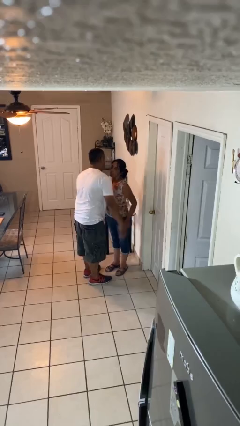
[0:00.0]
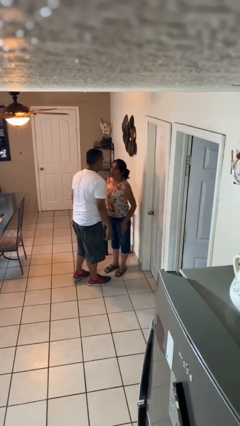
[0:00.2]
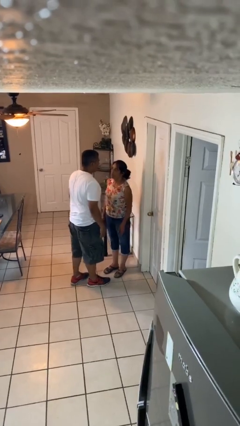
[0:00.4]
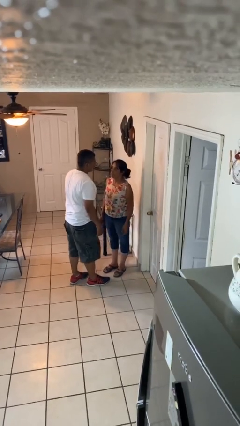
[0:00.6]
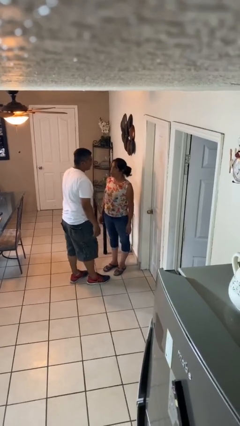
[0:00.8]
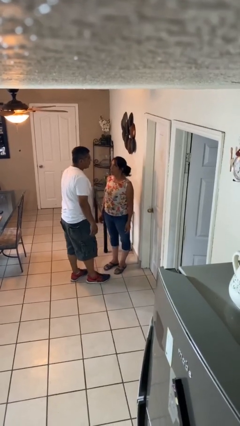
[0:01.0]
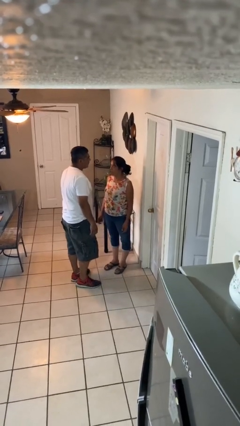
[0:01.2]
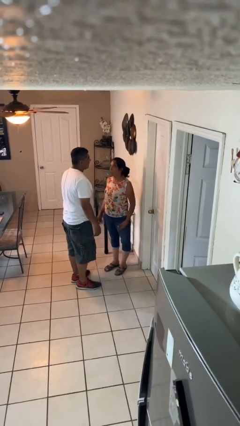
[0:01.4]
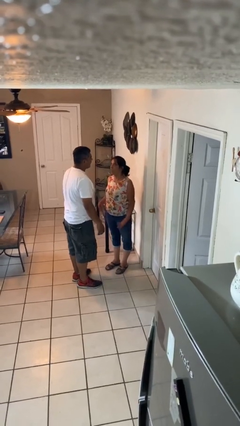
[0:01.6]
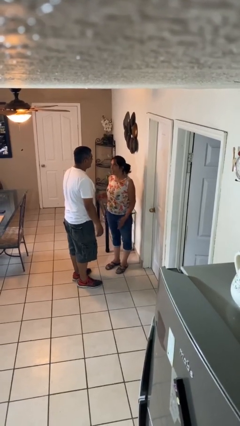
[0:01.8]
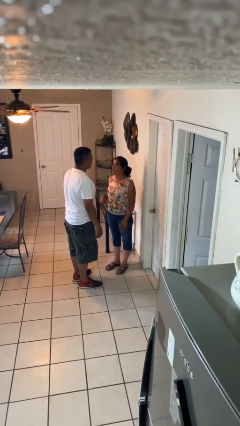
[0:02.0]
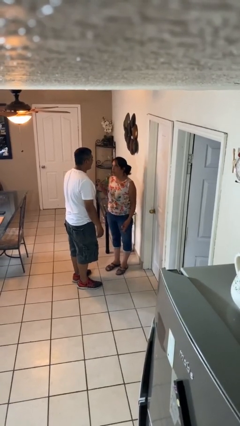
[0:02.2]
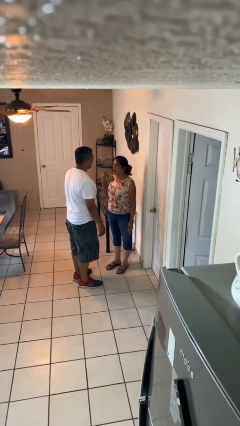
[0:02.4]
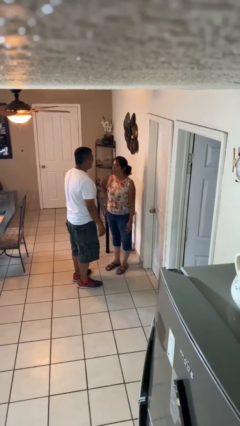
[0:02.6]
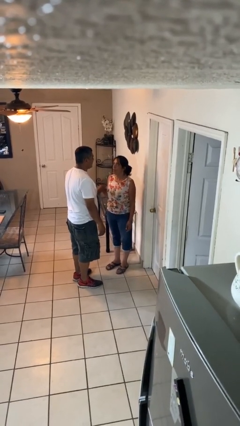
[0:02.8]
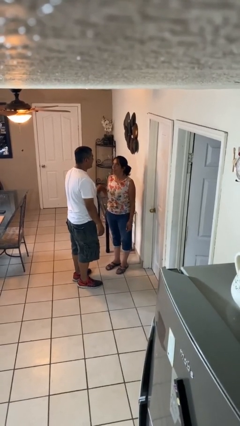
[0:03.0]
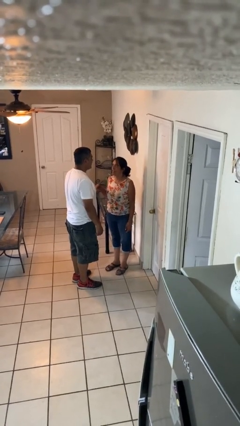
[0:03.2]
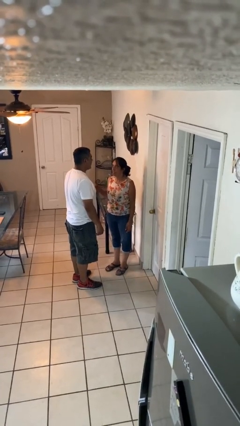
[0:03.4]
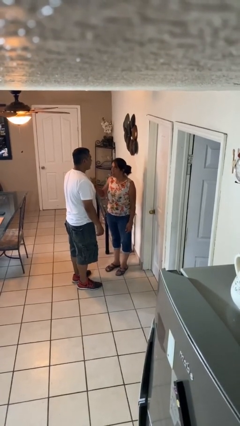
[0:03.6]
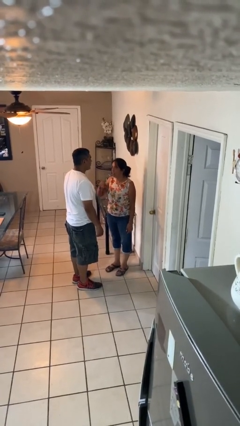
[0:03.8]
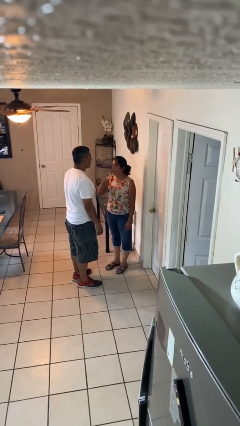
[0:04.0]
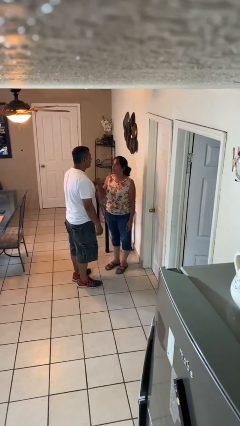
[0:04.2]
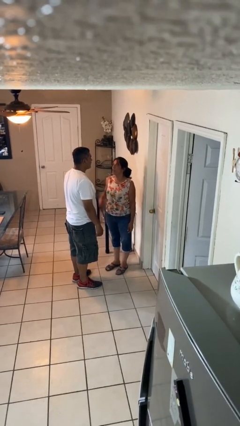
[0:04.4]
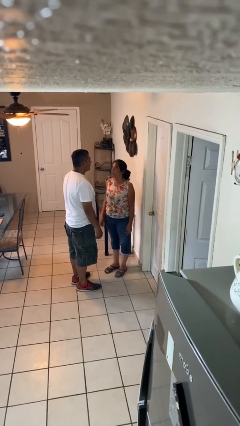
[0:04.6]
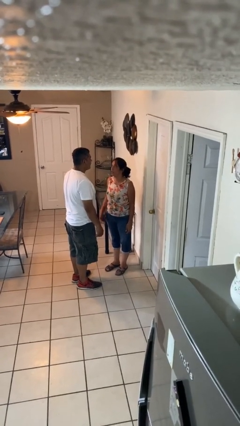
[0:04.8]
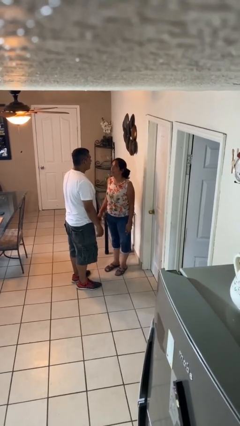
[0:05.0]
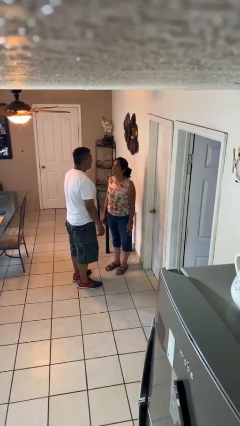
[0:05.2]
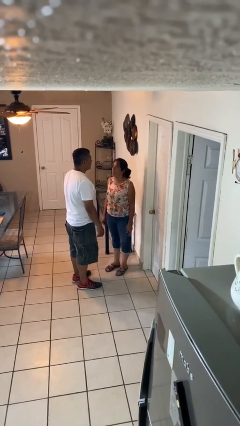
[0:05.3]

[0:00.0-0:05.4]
person talks to person

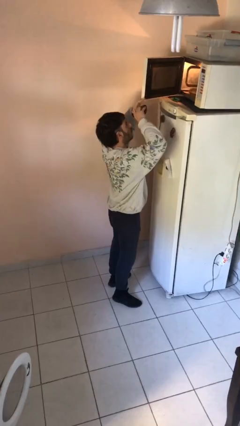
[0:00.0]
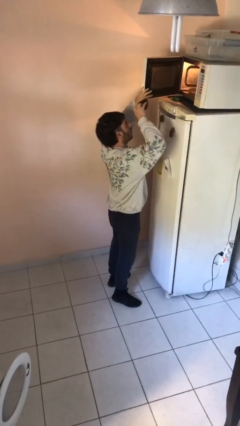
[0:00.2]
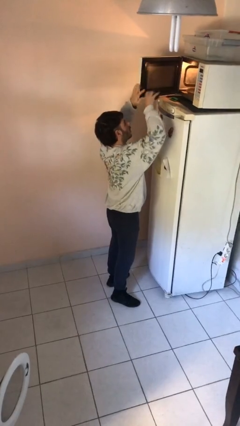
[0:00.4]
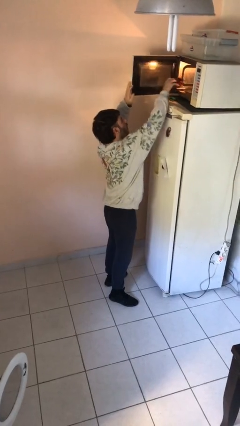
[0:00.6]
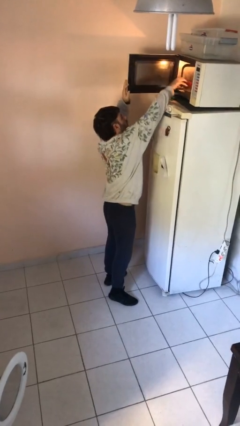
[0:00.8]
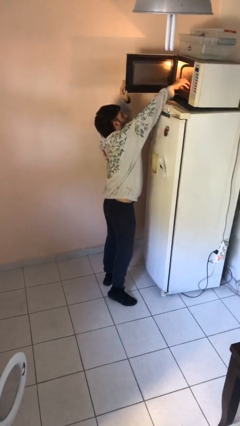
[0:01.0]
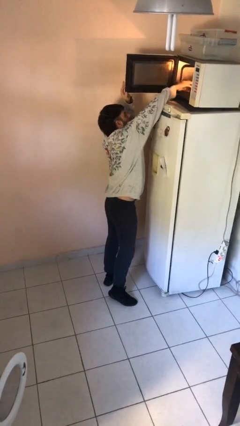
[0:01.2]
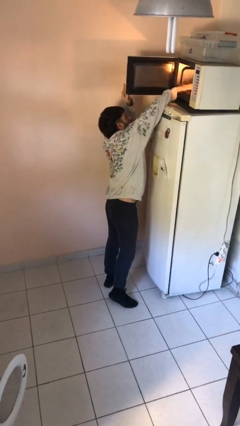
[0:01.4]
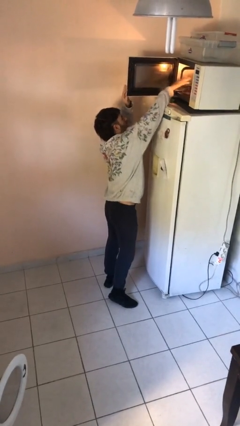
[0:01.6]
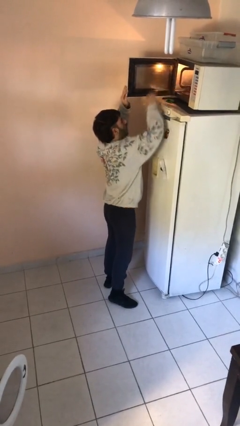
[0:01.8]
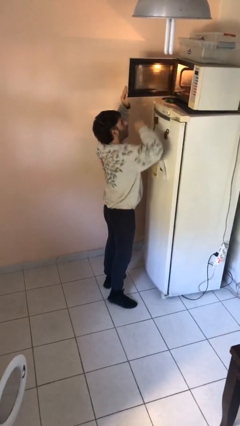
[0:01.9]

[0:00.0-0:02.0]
person puts object into microwave

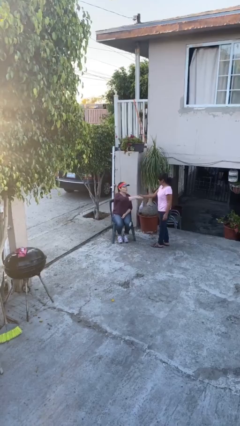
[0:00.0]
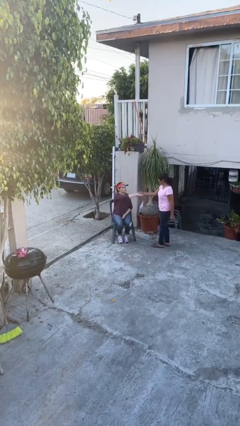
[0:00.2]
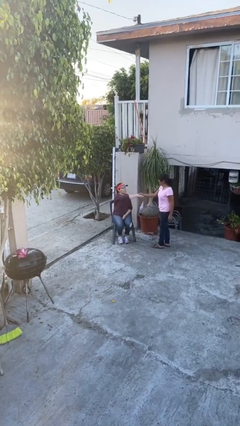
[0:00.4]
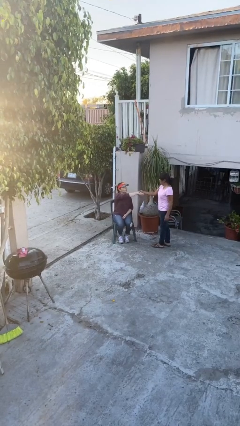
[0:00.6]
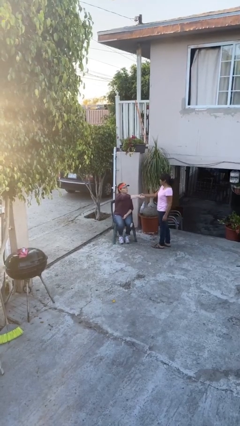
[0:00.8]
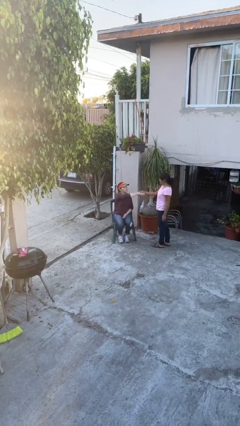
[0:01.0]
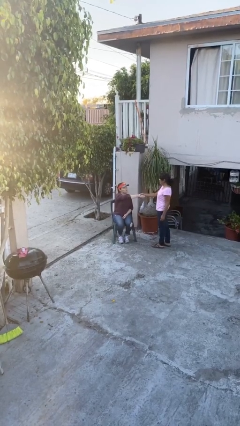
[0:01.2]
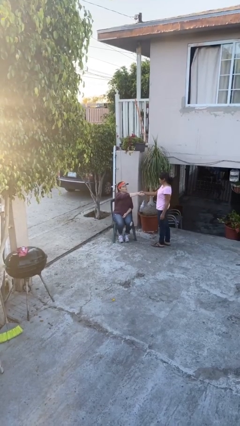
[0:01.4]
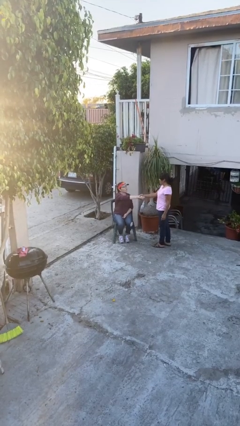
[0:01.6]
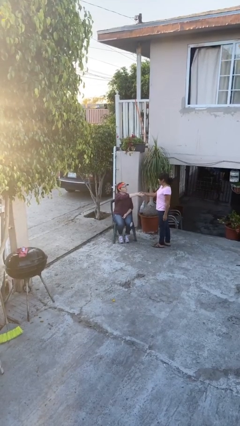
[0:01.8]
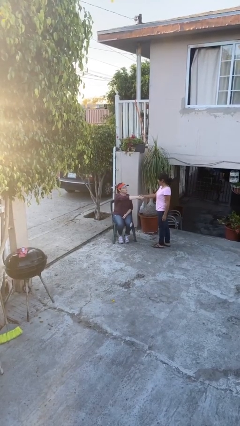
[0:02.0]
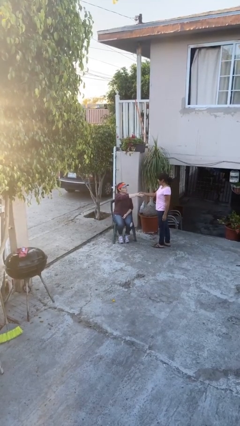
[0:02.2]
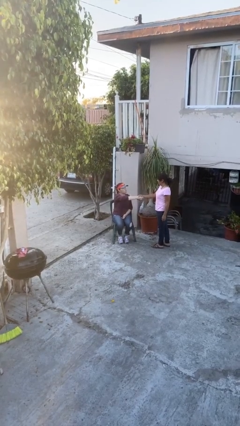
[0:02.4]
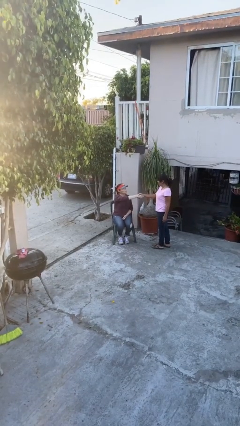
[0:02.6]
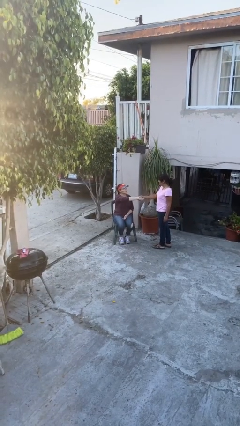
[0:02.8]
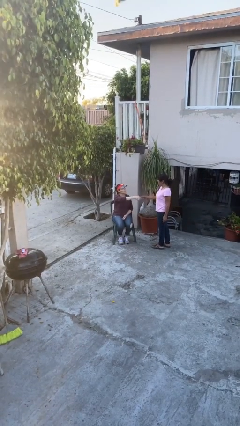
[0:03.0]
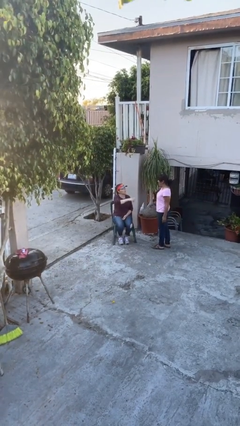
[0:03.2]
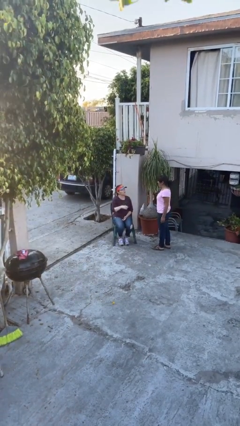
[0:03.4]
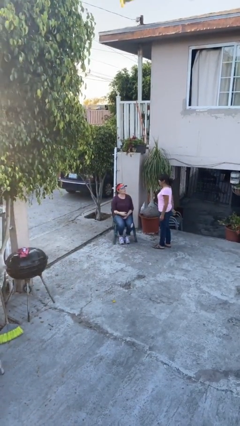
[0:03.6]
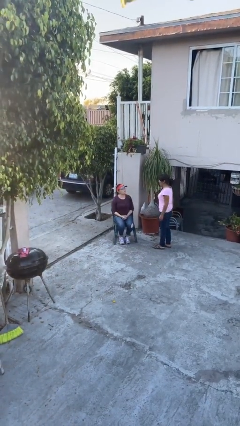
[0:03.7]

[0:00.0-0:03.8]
person shakes hand

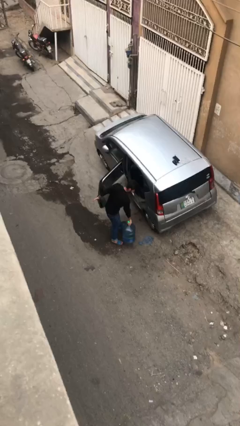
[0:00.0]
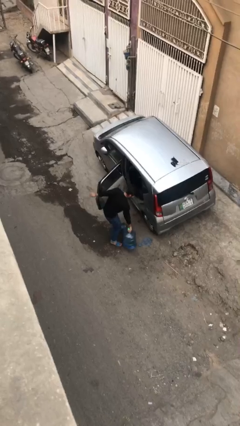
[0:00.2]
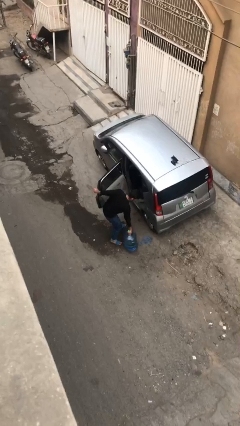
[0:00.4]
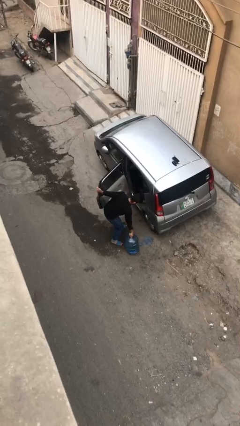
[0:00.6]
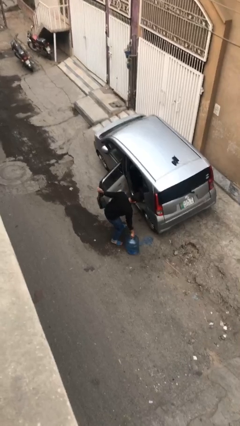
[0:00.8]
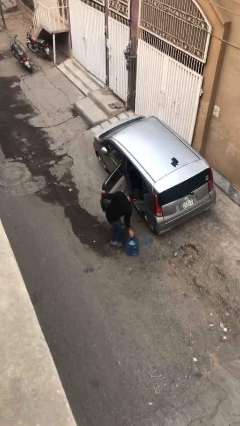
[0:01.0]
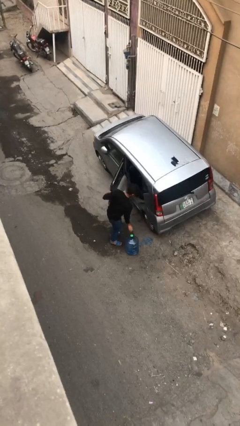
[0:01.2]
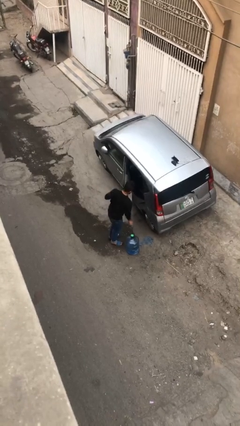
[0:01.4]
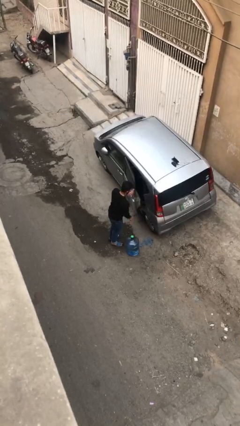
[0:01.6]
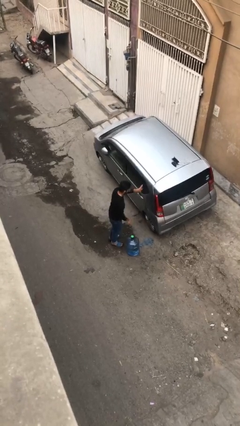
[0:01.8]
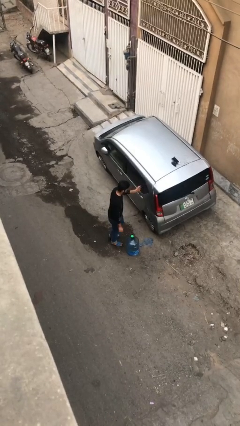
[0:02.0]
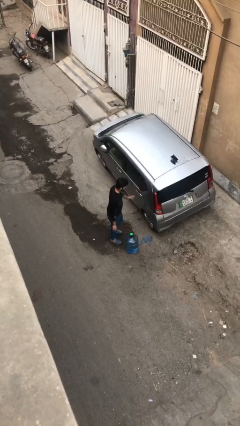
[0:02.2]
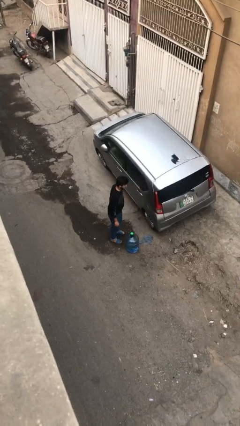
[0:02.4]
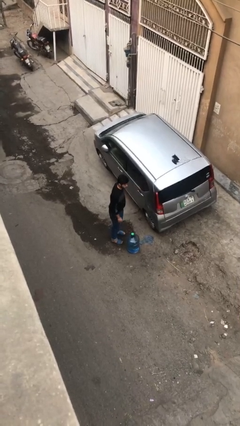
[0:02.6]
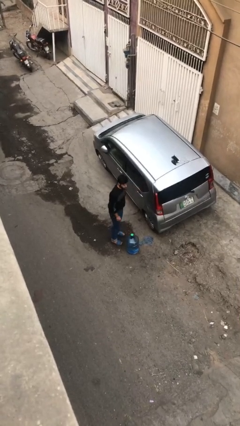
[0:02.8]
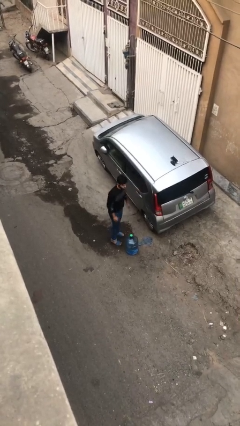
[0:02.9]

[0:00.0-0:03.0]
person closes car door

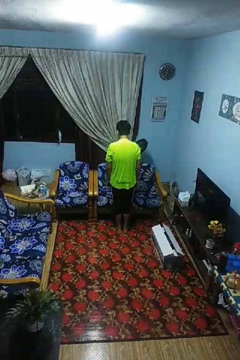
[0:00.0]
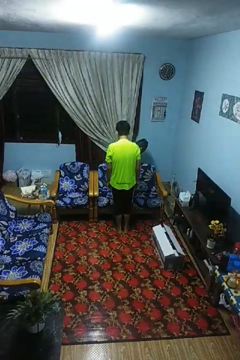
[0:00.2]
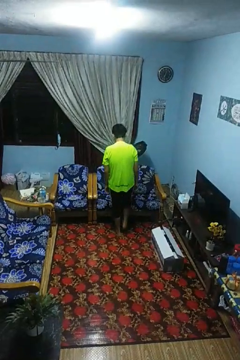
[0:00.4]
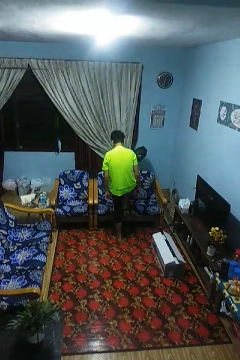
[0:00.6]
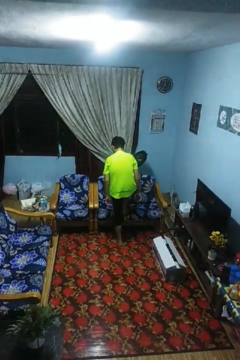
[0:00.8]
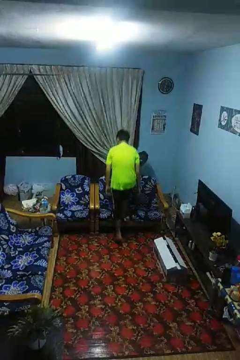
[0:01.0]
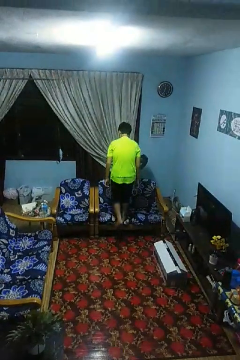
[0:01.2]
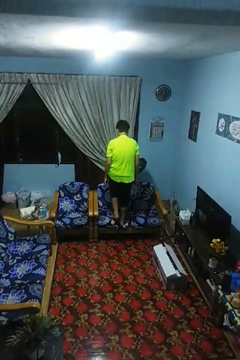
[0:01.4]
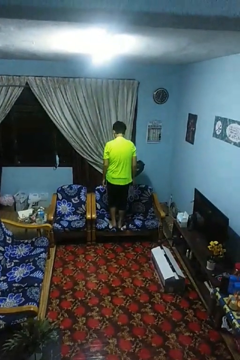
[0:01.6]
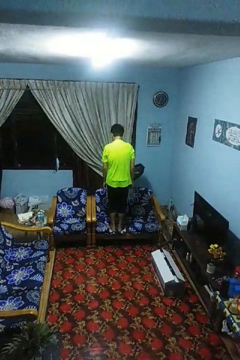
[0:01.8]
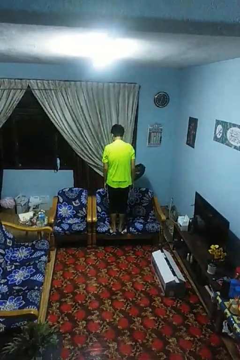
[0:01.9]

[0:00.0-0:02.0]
person climbs on couch

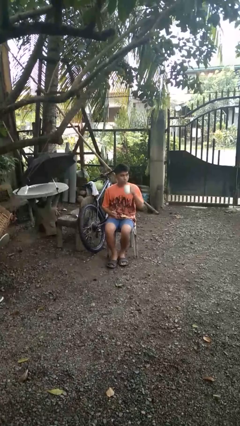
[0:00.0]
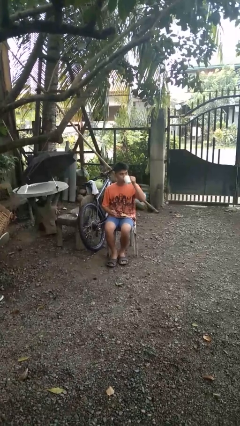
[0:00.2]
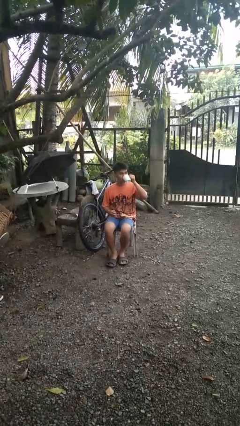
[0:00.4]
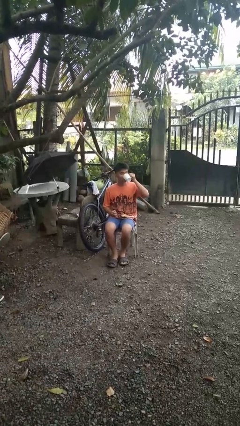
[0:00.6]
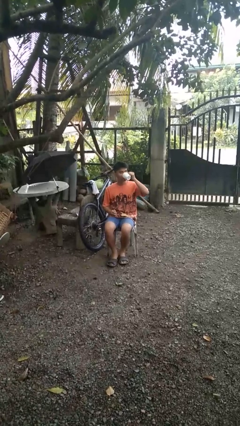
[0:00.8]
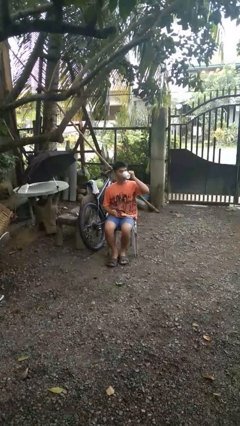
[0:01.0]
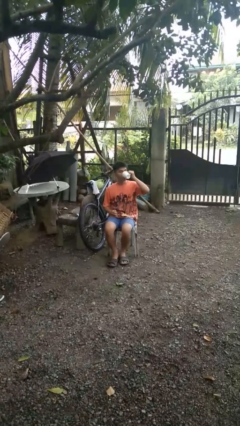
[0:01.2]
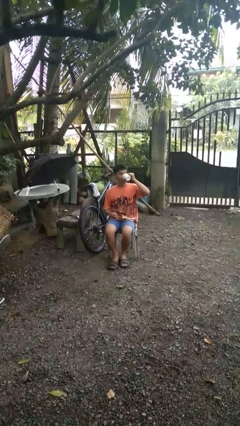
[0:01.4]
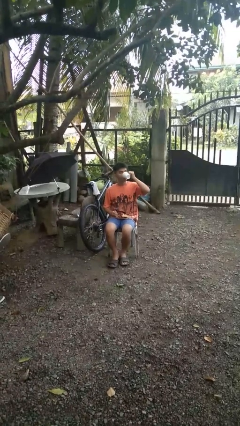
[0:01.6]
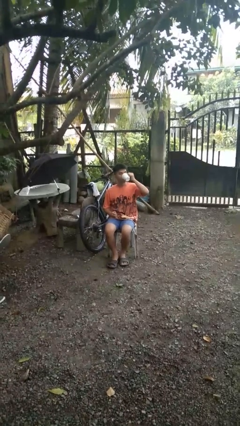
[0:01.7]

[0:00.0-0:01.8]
person drinks from mug
